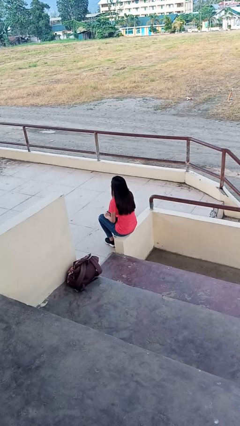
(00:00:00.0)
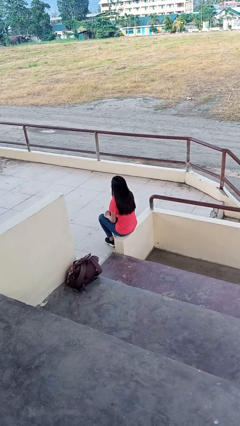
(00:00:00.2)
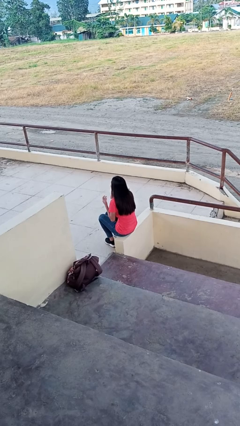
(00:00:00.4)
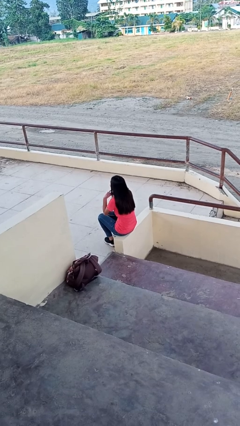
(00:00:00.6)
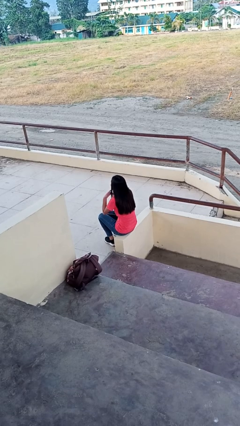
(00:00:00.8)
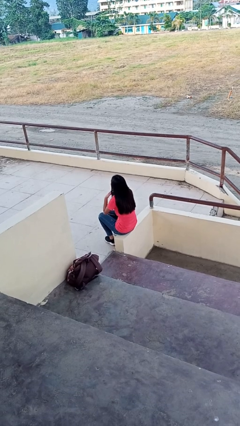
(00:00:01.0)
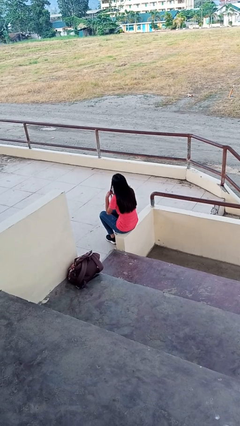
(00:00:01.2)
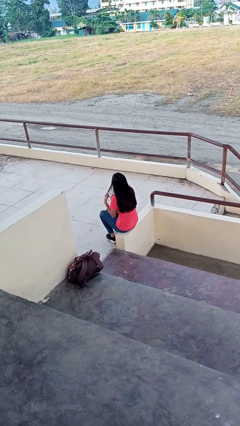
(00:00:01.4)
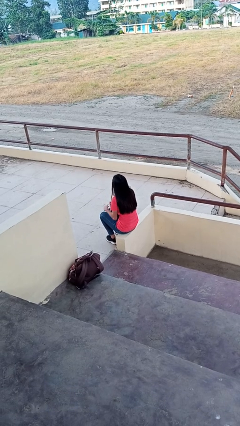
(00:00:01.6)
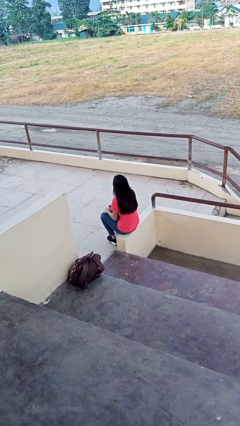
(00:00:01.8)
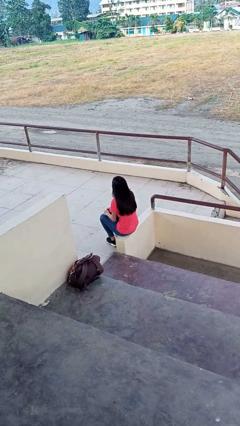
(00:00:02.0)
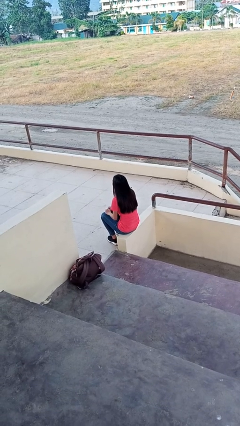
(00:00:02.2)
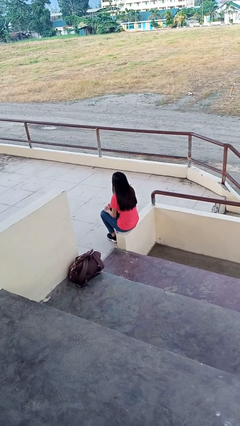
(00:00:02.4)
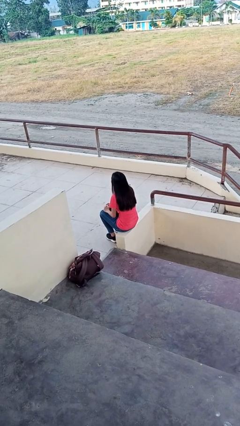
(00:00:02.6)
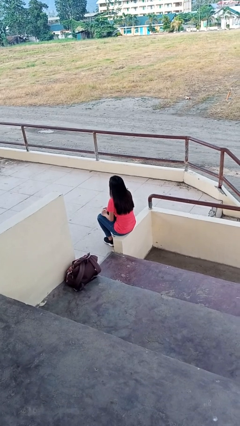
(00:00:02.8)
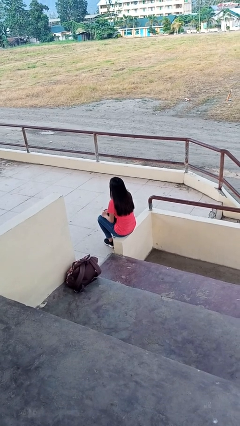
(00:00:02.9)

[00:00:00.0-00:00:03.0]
person takes off headphones

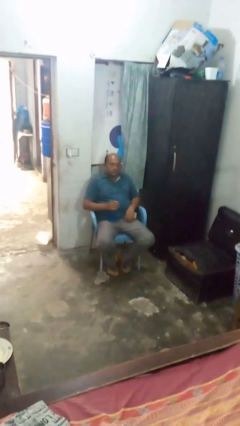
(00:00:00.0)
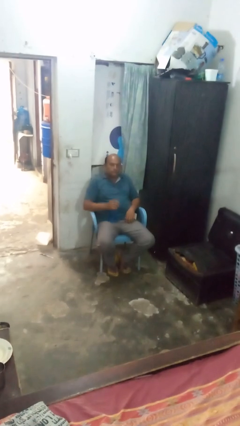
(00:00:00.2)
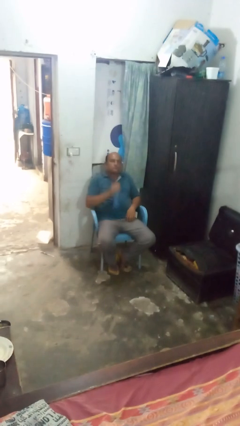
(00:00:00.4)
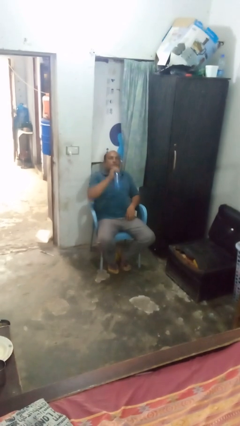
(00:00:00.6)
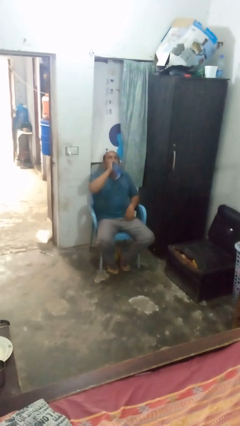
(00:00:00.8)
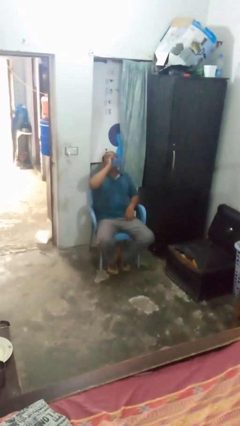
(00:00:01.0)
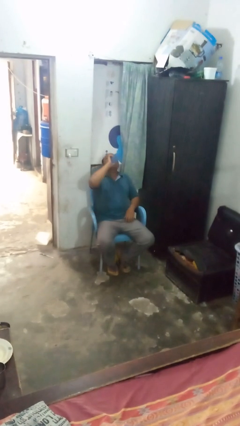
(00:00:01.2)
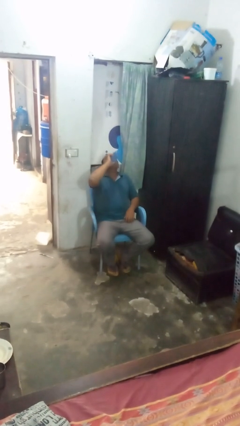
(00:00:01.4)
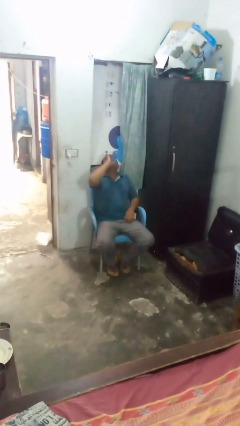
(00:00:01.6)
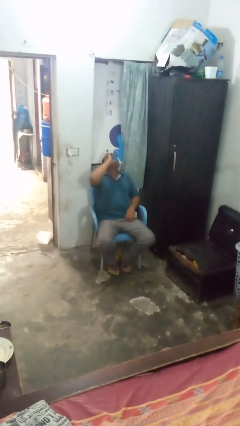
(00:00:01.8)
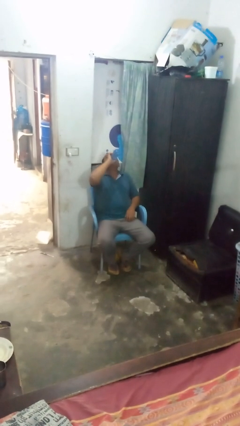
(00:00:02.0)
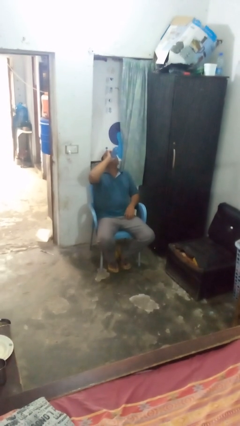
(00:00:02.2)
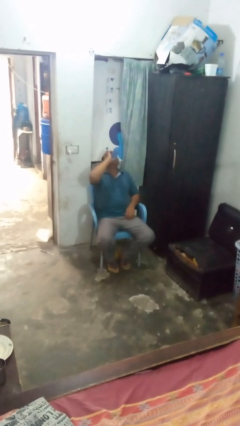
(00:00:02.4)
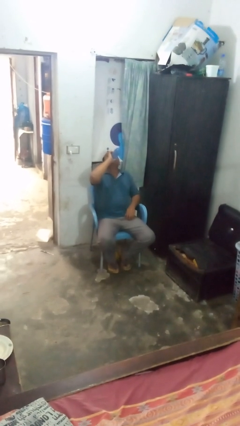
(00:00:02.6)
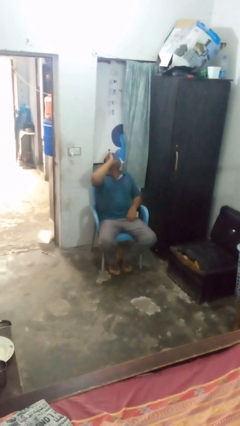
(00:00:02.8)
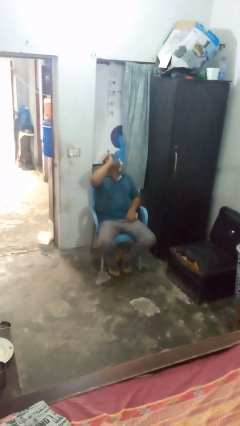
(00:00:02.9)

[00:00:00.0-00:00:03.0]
person drinks from bottle

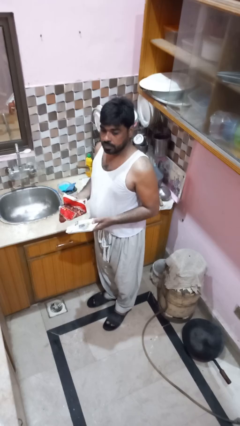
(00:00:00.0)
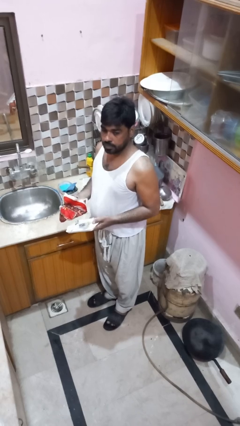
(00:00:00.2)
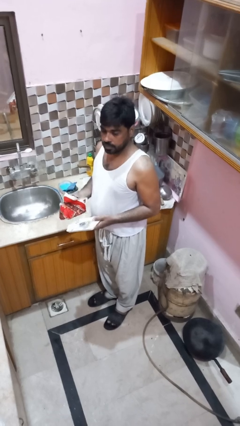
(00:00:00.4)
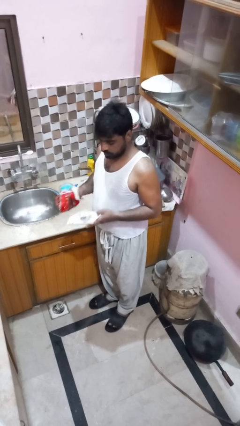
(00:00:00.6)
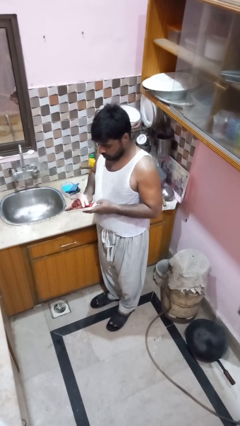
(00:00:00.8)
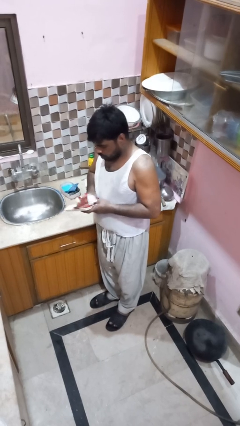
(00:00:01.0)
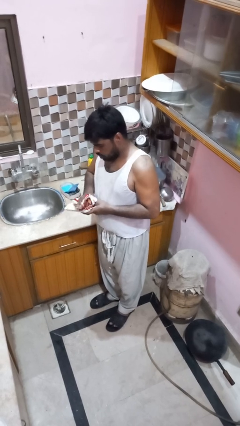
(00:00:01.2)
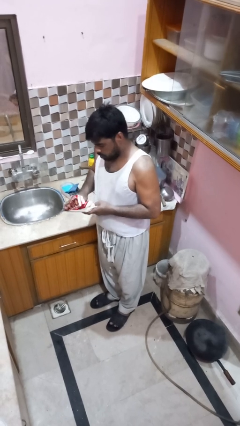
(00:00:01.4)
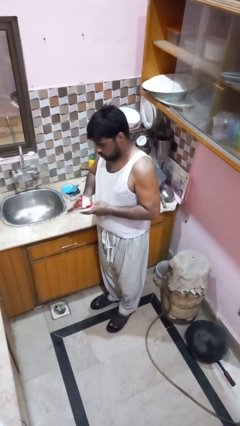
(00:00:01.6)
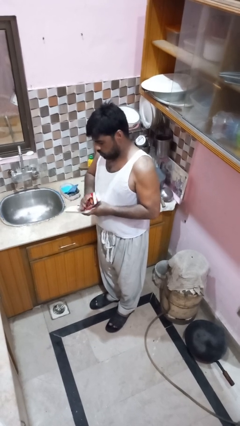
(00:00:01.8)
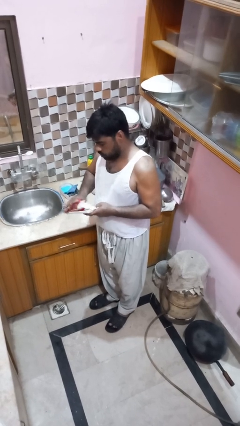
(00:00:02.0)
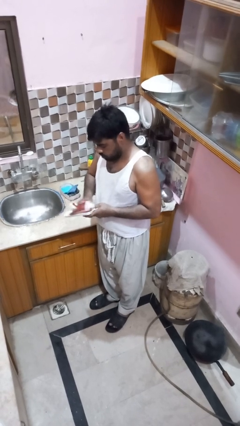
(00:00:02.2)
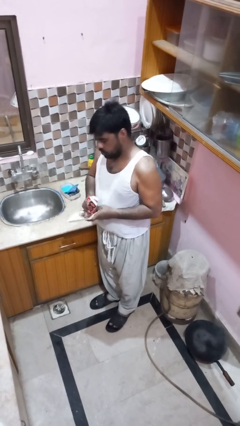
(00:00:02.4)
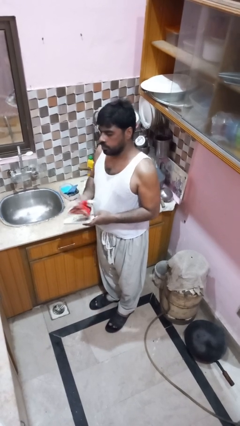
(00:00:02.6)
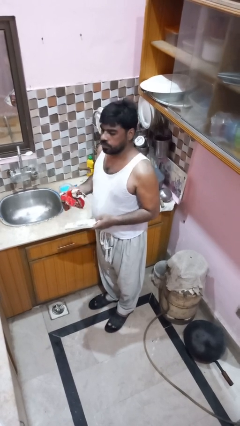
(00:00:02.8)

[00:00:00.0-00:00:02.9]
person dries dish

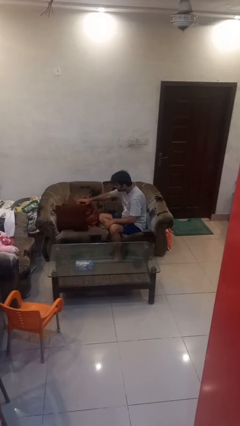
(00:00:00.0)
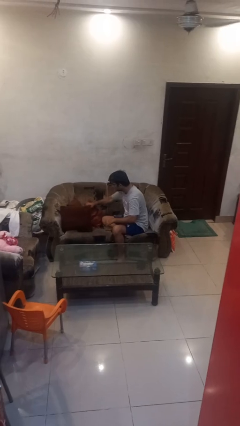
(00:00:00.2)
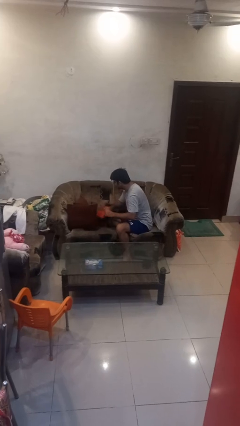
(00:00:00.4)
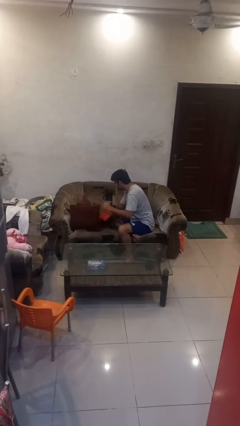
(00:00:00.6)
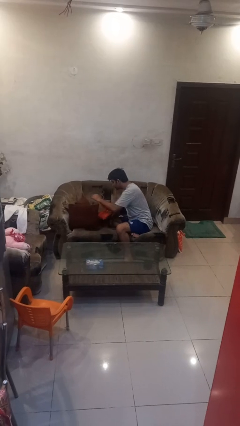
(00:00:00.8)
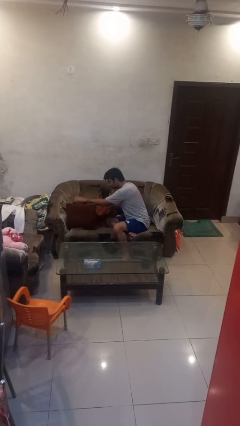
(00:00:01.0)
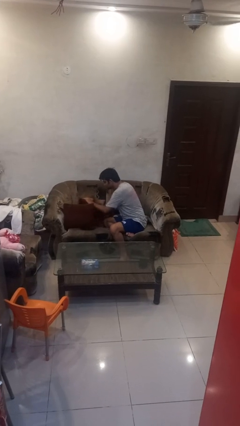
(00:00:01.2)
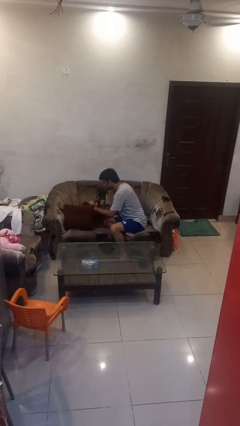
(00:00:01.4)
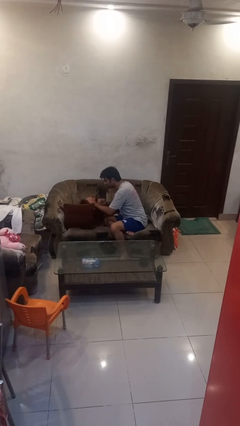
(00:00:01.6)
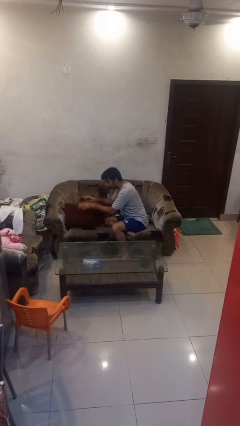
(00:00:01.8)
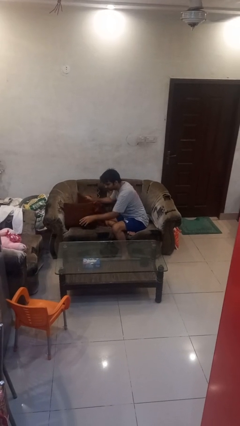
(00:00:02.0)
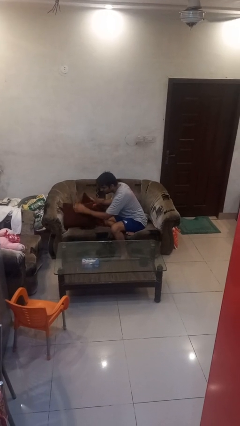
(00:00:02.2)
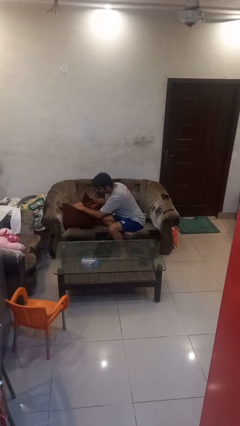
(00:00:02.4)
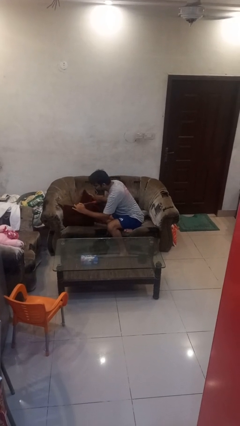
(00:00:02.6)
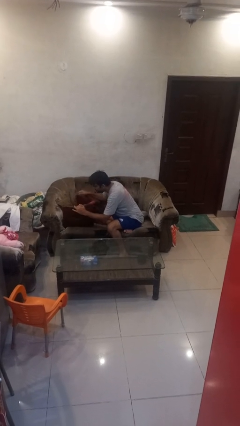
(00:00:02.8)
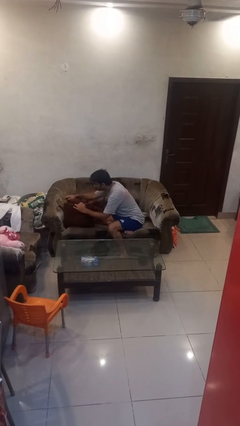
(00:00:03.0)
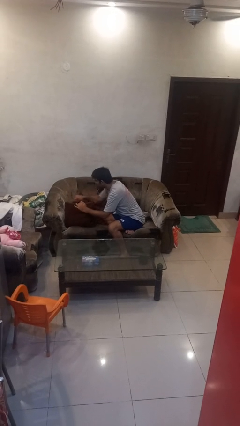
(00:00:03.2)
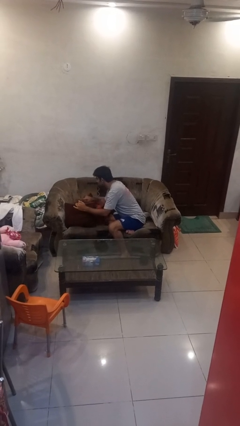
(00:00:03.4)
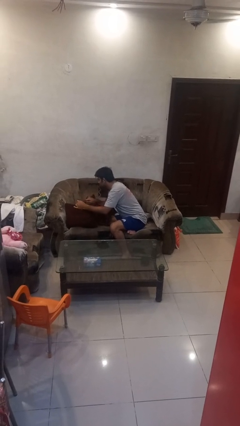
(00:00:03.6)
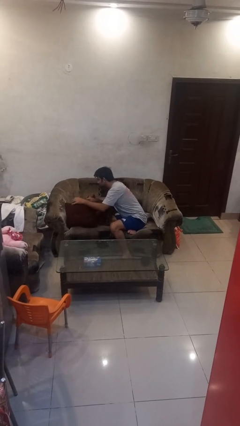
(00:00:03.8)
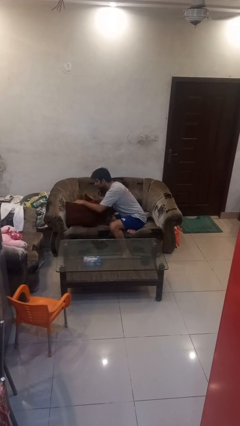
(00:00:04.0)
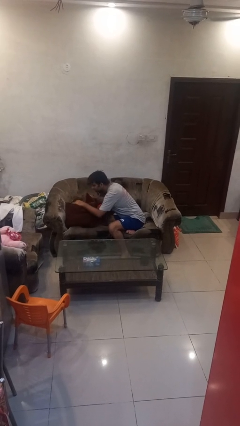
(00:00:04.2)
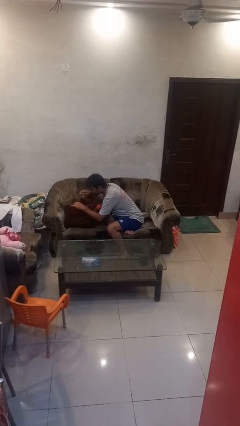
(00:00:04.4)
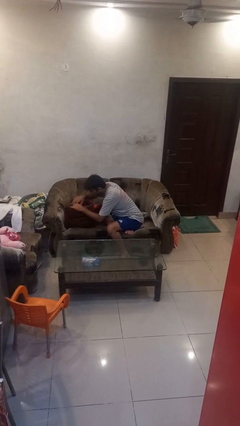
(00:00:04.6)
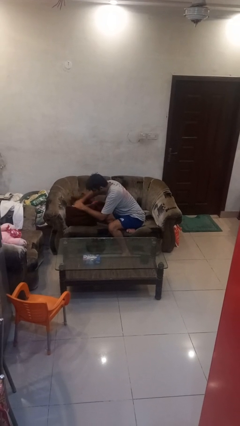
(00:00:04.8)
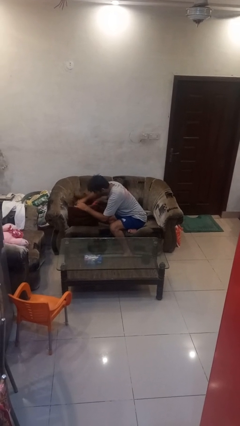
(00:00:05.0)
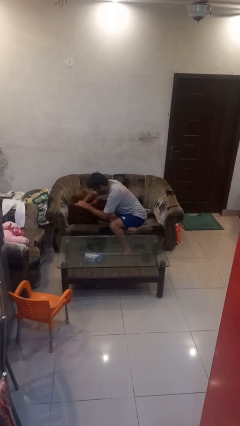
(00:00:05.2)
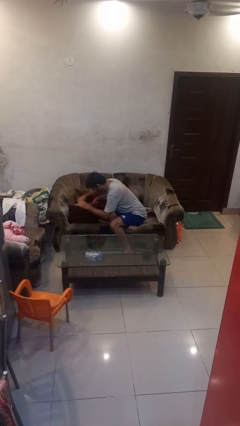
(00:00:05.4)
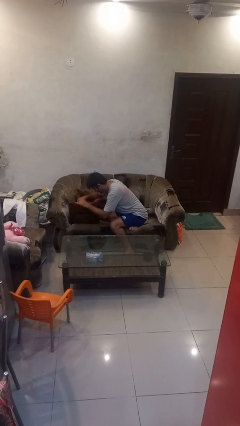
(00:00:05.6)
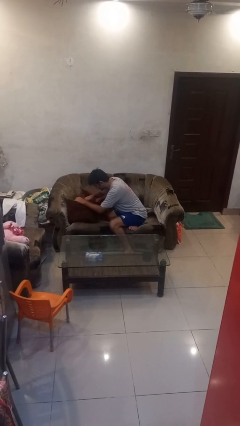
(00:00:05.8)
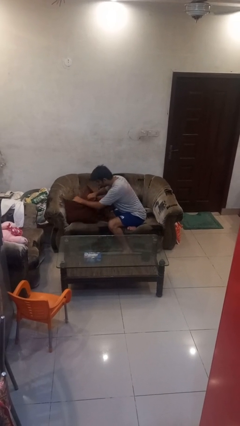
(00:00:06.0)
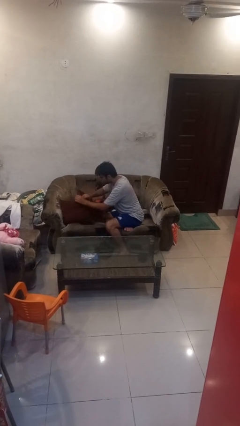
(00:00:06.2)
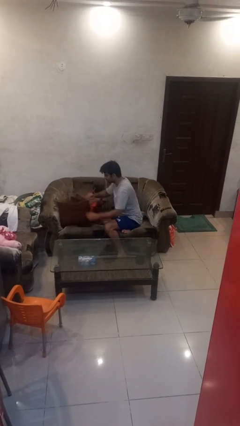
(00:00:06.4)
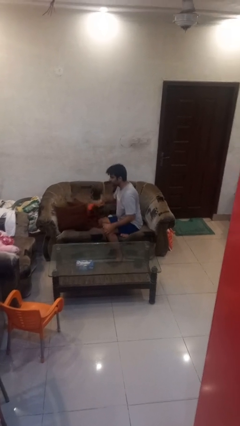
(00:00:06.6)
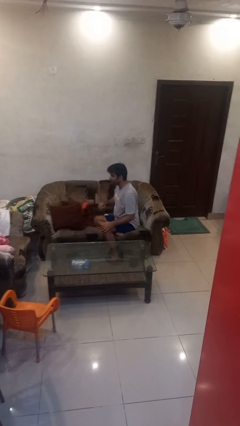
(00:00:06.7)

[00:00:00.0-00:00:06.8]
person searches in couch

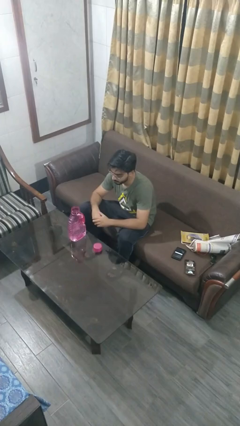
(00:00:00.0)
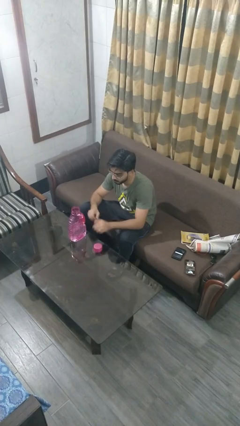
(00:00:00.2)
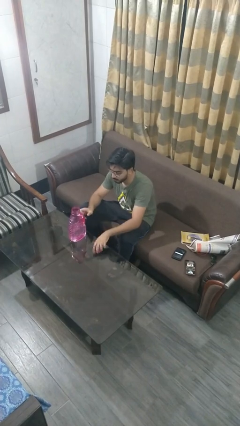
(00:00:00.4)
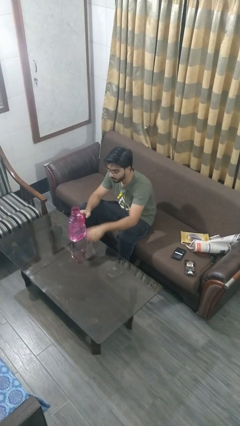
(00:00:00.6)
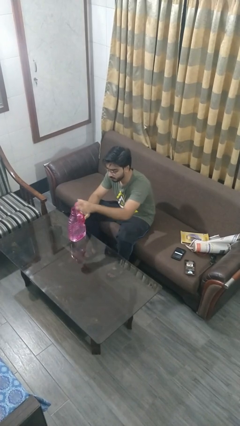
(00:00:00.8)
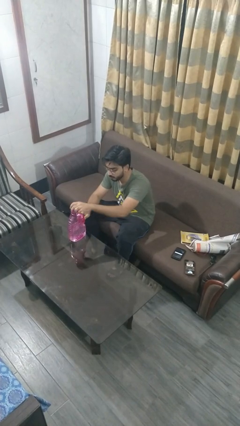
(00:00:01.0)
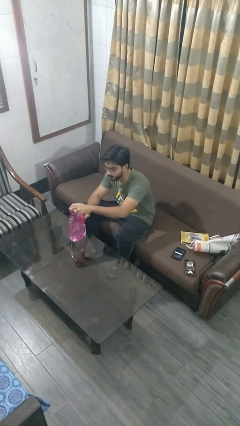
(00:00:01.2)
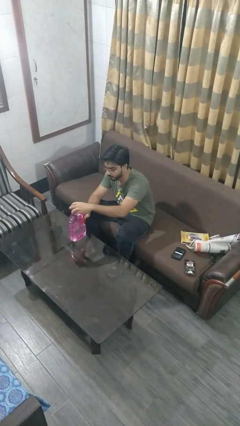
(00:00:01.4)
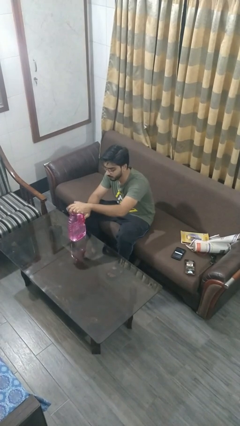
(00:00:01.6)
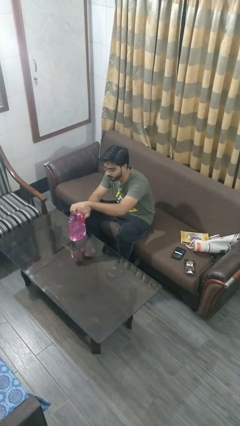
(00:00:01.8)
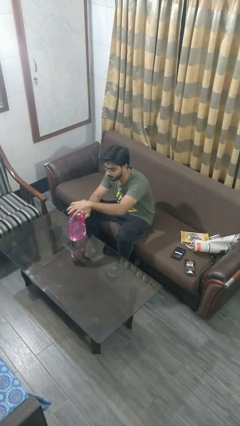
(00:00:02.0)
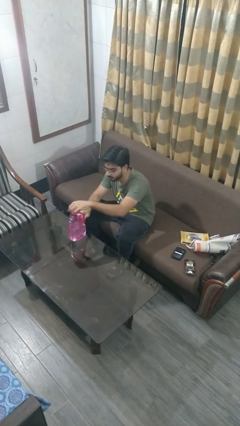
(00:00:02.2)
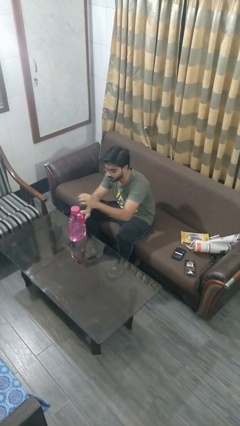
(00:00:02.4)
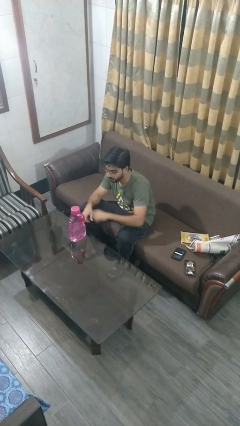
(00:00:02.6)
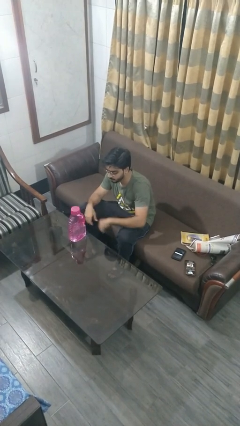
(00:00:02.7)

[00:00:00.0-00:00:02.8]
person screws lid to bottle